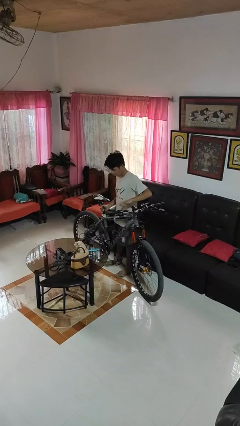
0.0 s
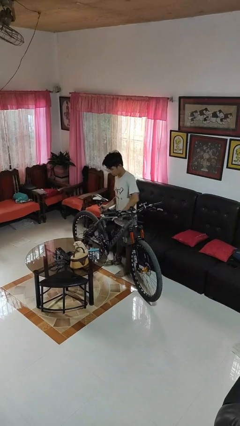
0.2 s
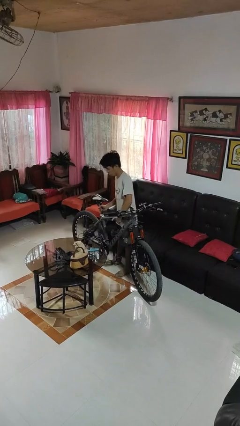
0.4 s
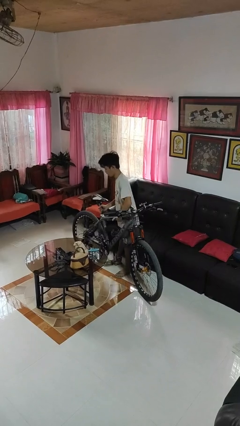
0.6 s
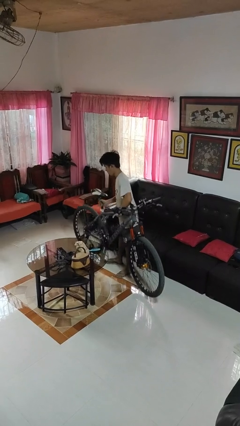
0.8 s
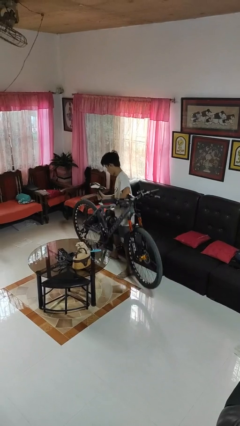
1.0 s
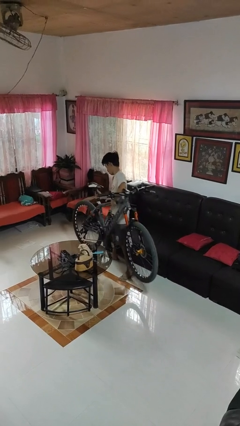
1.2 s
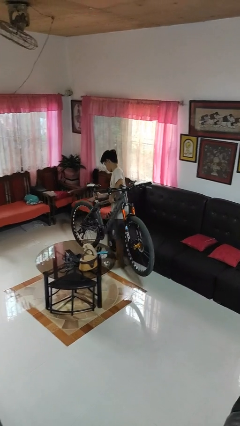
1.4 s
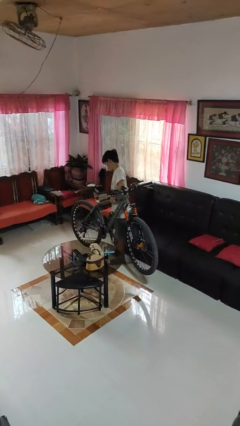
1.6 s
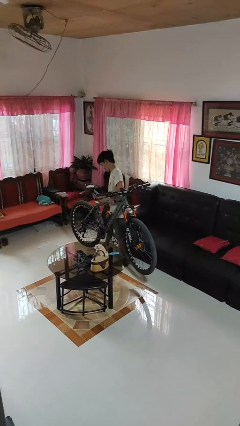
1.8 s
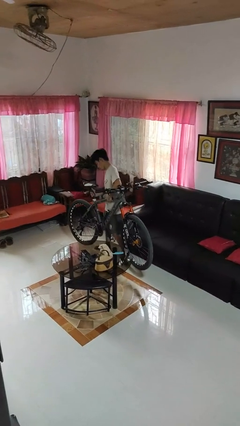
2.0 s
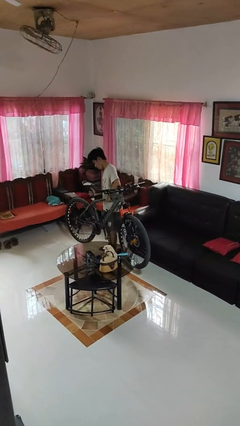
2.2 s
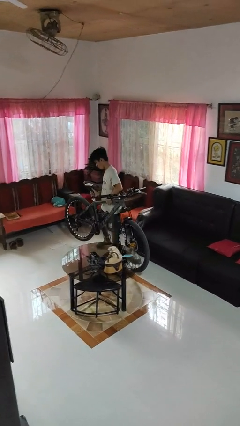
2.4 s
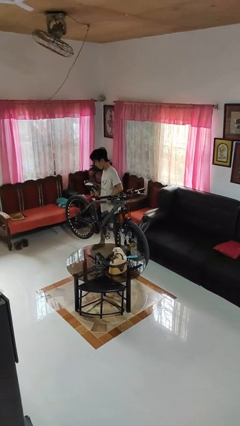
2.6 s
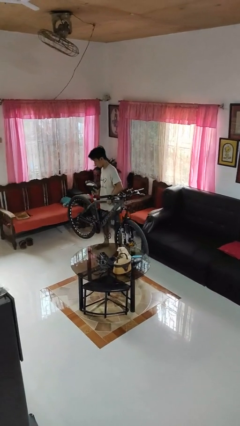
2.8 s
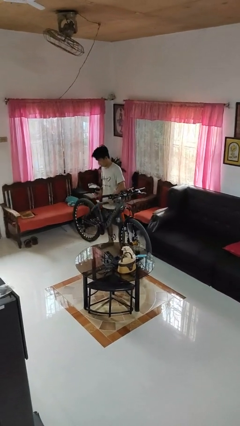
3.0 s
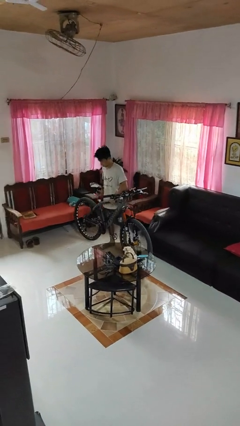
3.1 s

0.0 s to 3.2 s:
person carries bicycle

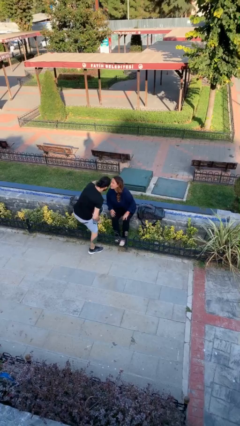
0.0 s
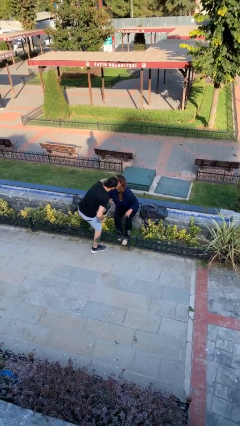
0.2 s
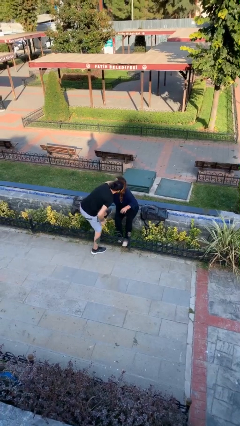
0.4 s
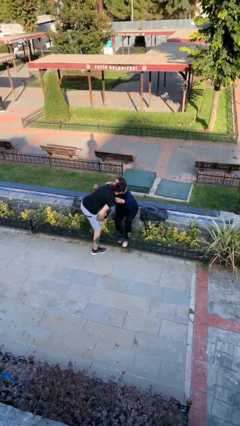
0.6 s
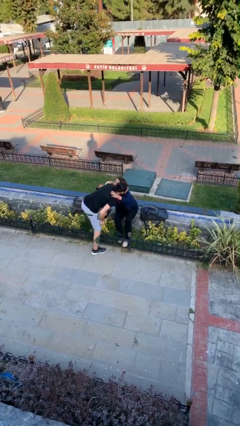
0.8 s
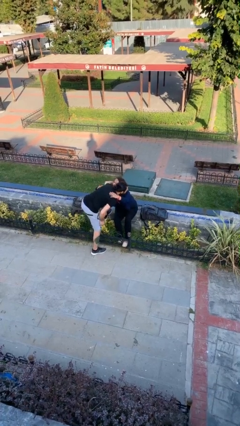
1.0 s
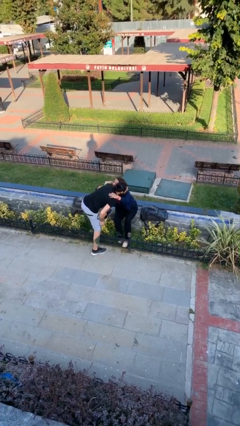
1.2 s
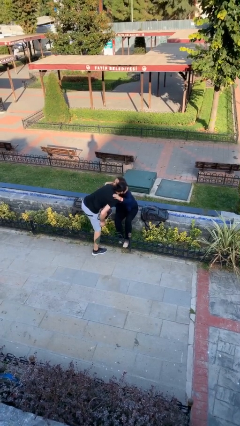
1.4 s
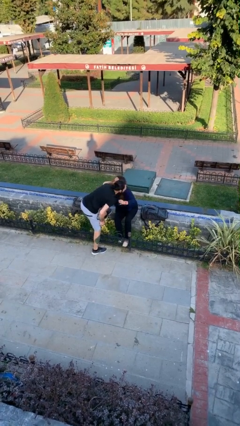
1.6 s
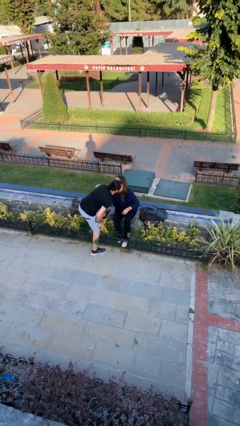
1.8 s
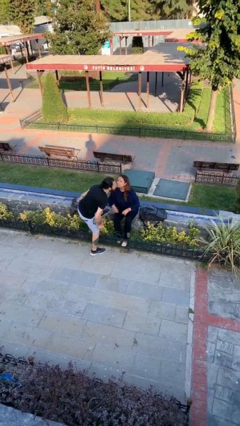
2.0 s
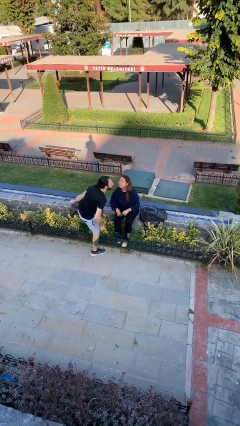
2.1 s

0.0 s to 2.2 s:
person embraces person

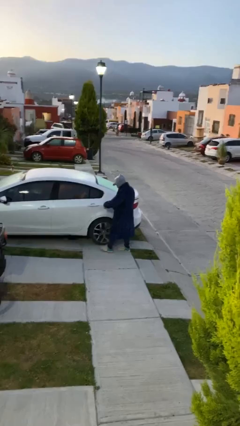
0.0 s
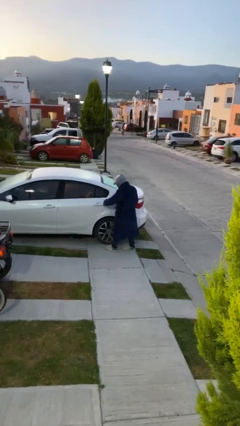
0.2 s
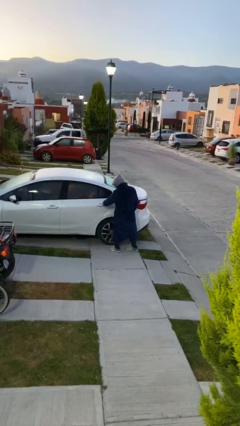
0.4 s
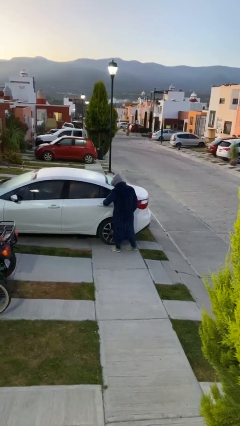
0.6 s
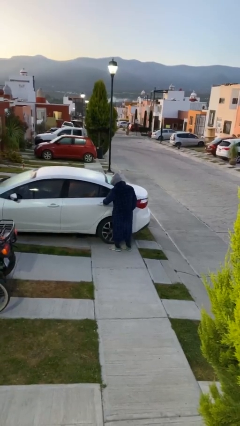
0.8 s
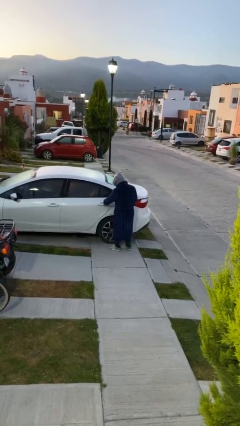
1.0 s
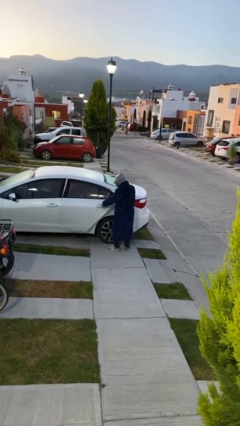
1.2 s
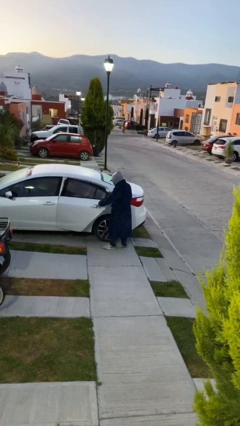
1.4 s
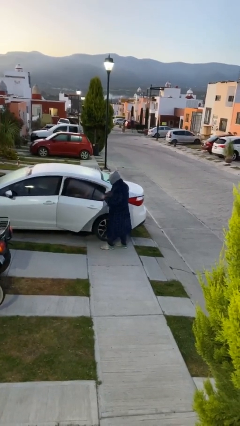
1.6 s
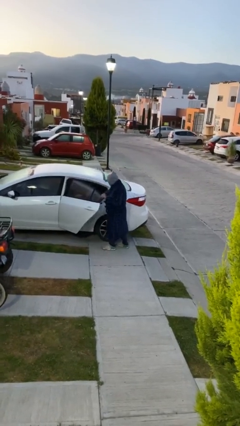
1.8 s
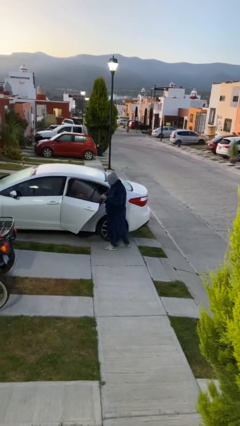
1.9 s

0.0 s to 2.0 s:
person opens car door

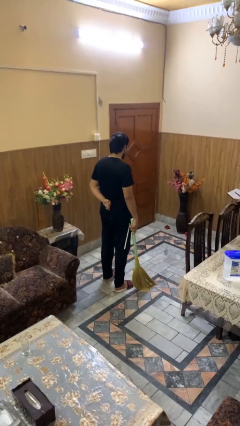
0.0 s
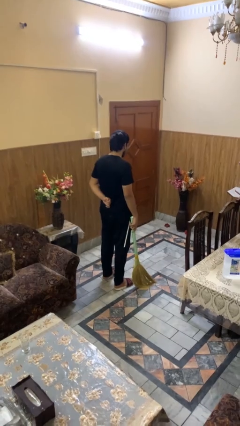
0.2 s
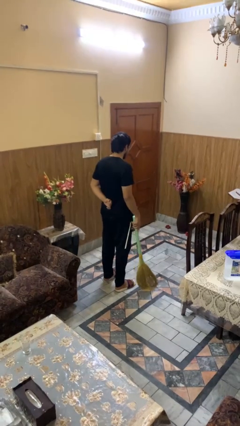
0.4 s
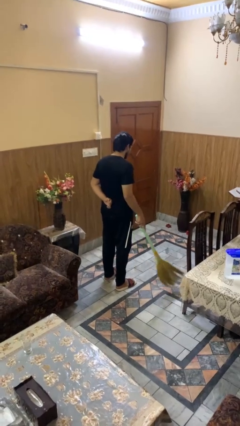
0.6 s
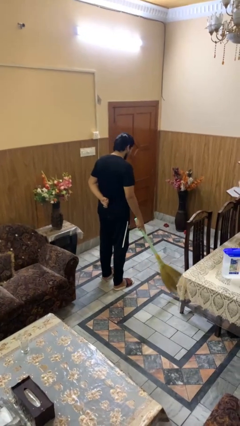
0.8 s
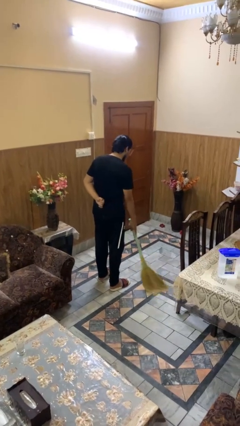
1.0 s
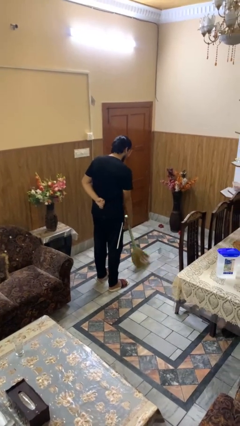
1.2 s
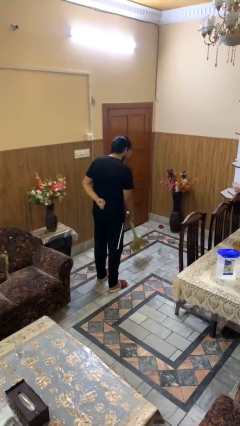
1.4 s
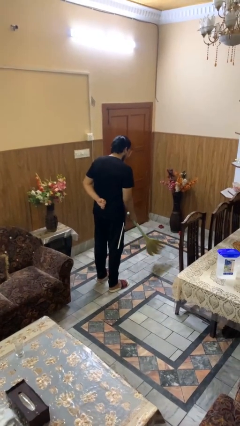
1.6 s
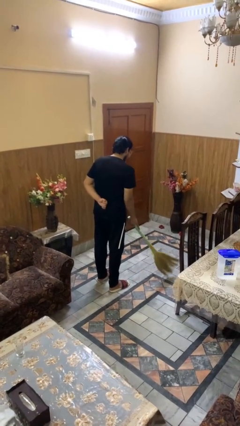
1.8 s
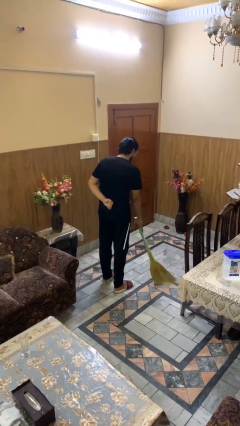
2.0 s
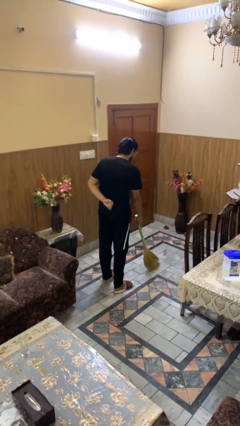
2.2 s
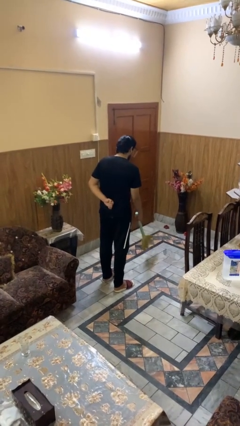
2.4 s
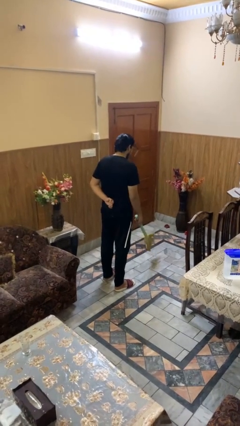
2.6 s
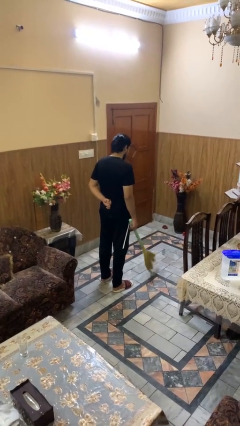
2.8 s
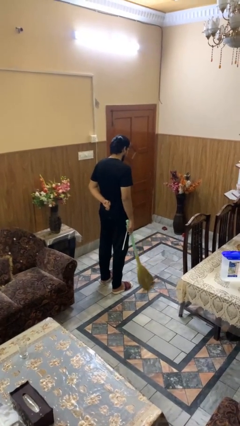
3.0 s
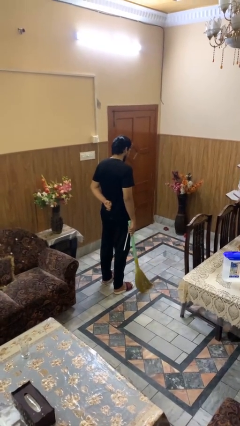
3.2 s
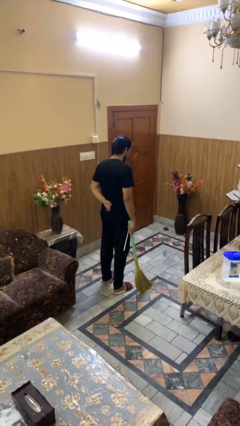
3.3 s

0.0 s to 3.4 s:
person sweeps floor

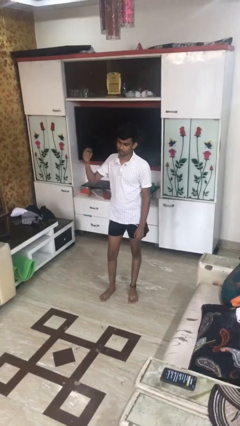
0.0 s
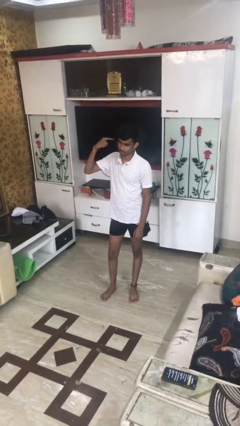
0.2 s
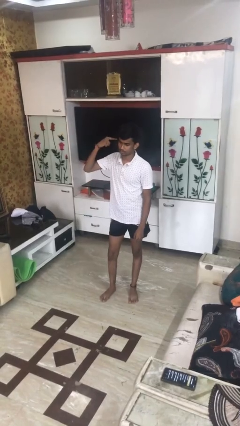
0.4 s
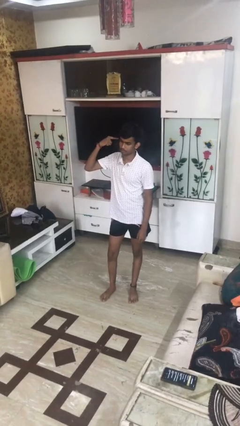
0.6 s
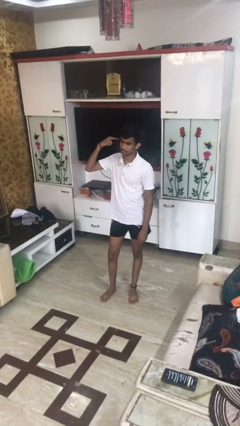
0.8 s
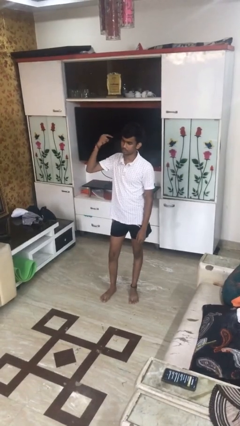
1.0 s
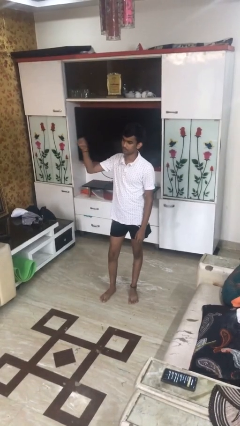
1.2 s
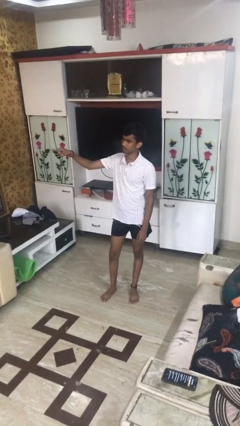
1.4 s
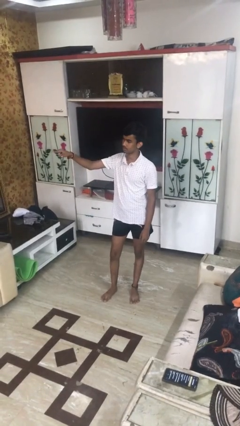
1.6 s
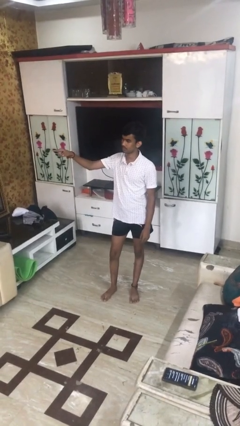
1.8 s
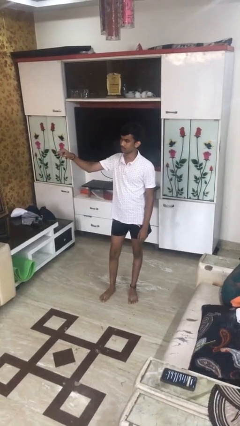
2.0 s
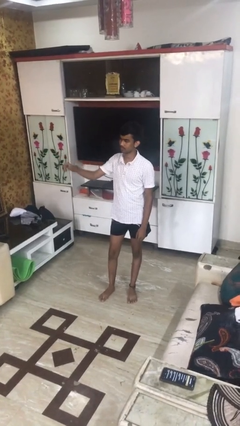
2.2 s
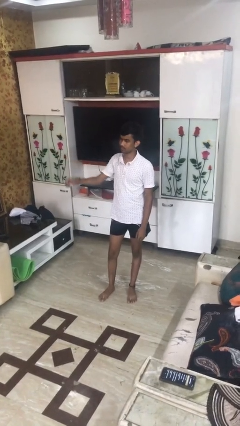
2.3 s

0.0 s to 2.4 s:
person gestures listen closely

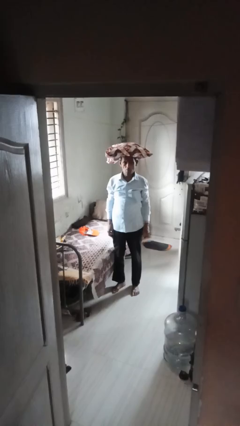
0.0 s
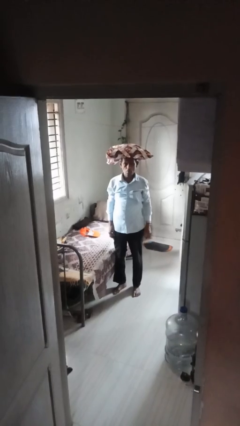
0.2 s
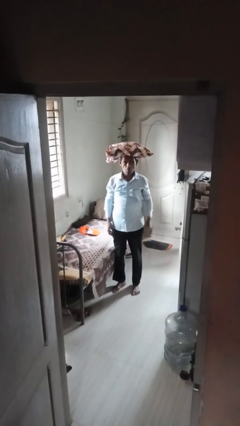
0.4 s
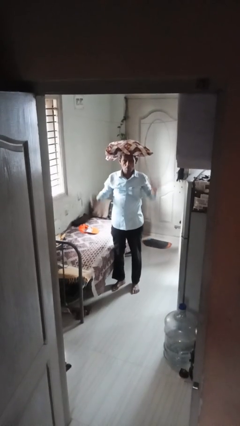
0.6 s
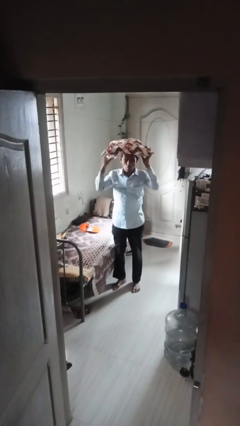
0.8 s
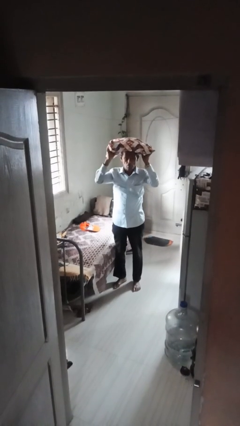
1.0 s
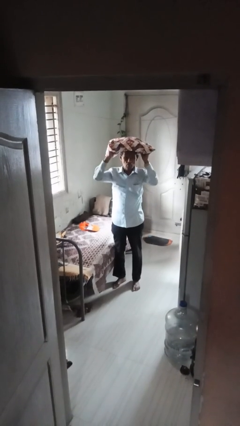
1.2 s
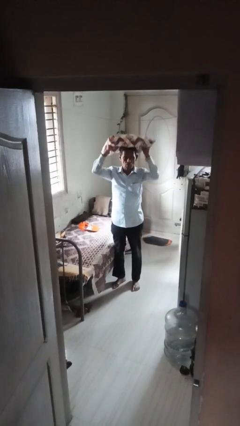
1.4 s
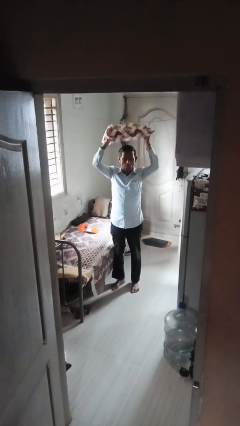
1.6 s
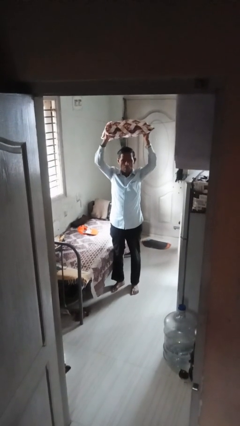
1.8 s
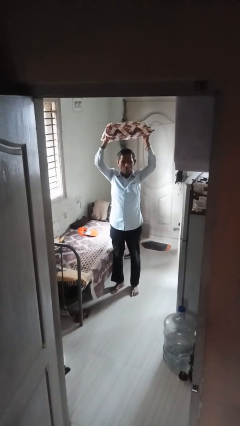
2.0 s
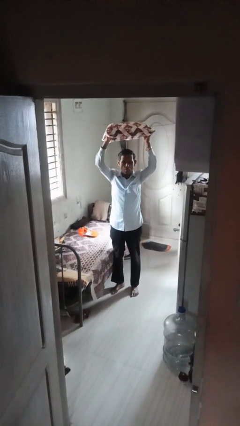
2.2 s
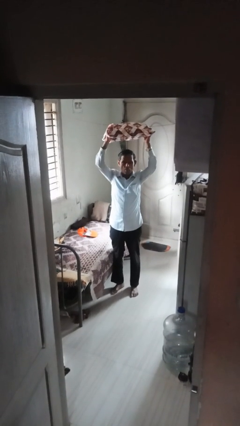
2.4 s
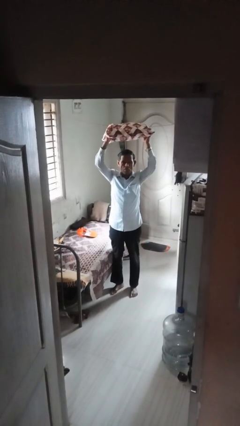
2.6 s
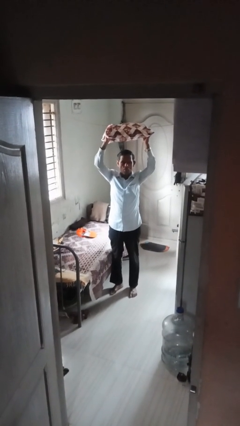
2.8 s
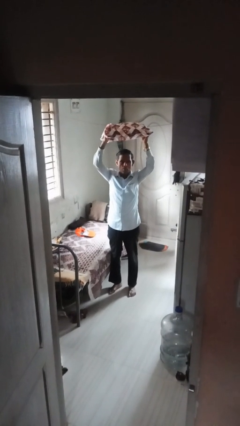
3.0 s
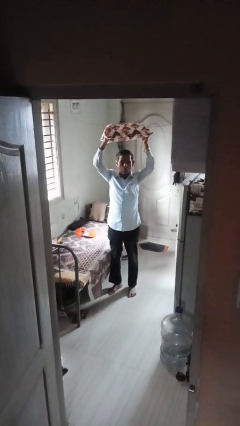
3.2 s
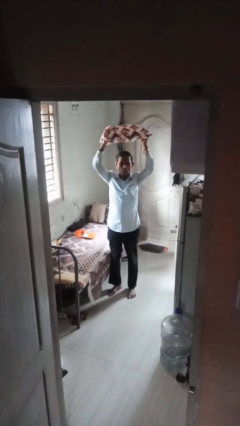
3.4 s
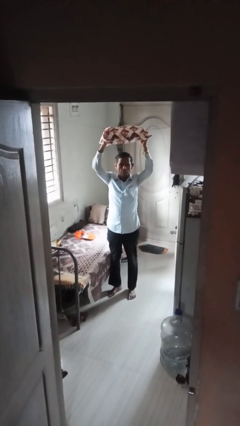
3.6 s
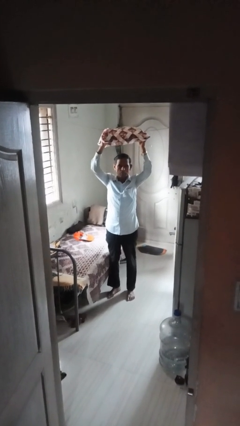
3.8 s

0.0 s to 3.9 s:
person holds object above head

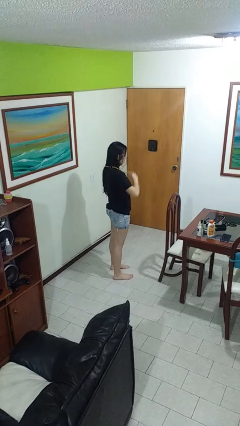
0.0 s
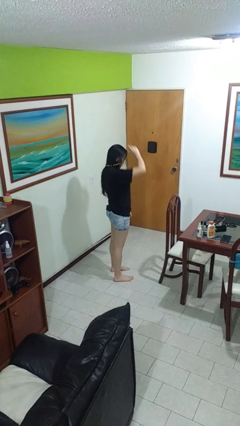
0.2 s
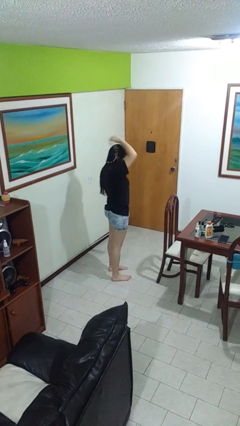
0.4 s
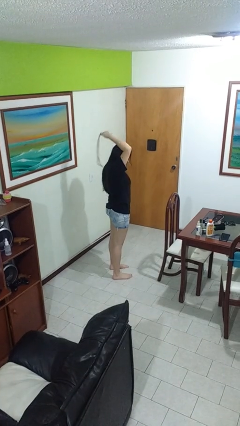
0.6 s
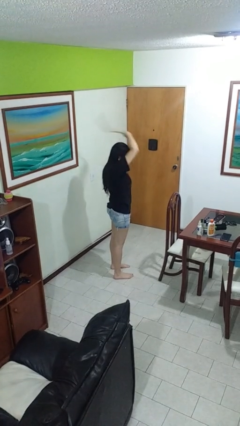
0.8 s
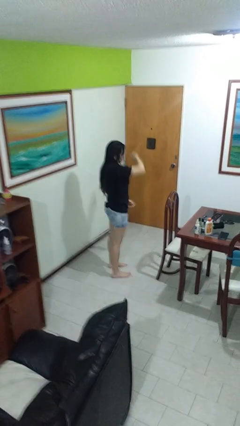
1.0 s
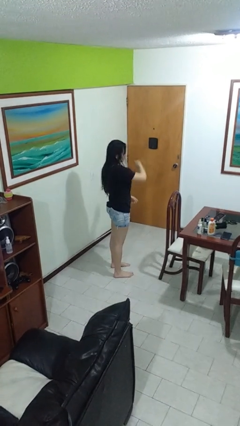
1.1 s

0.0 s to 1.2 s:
person takes off necklace
